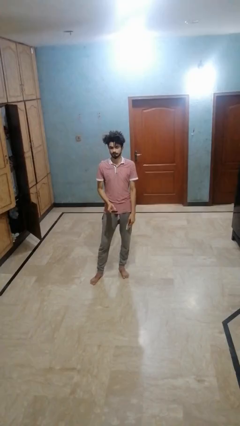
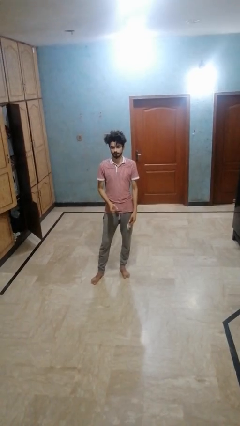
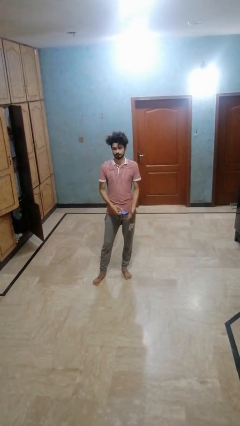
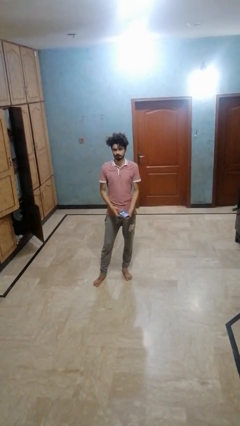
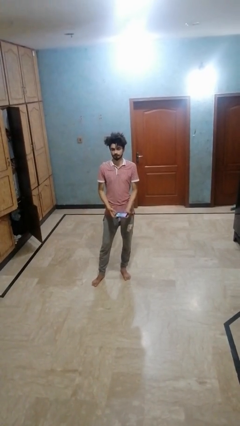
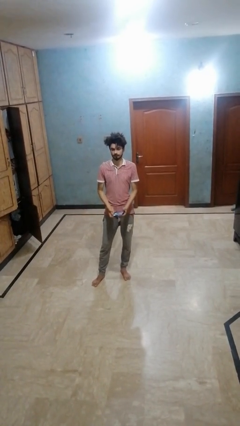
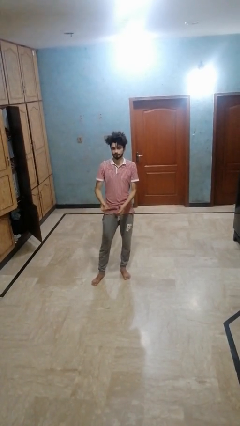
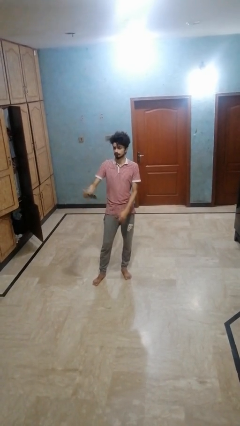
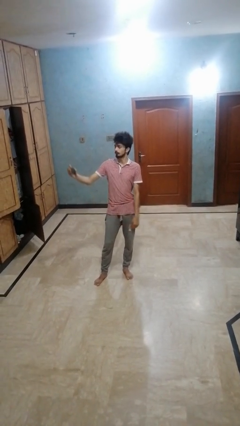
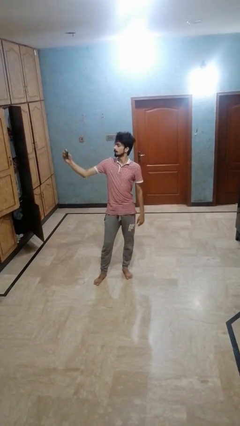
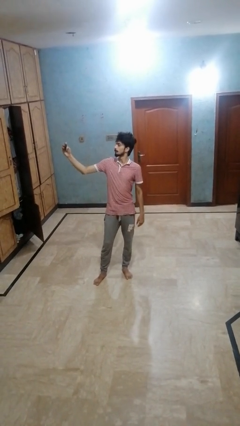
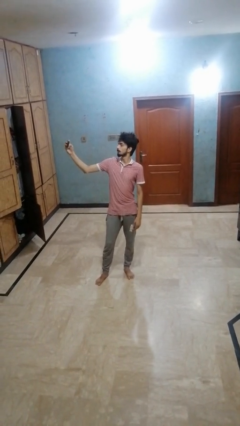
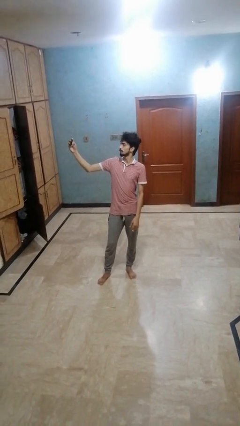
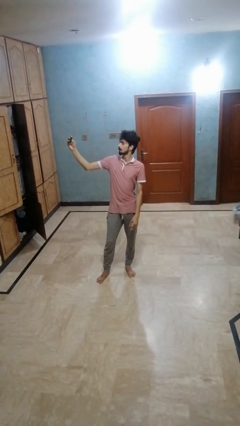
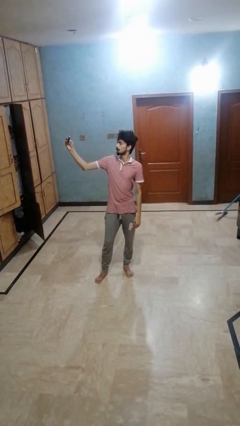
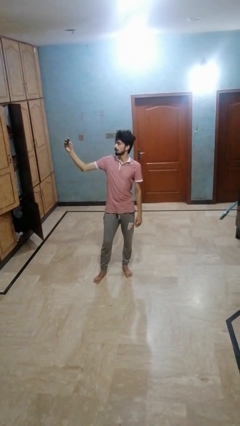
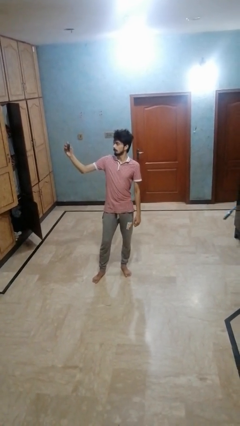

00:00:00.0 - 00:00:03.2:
person takes selfie

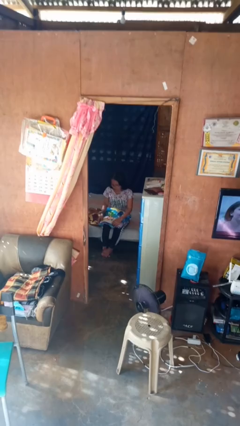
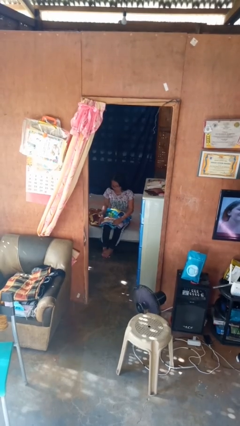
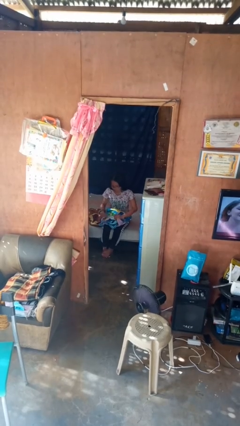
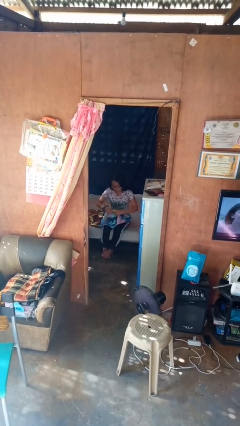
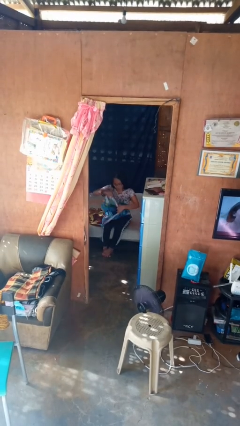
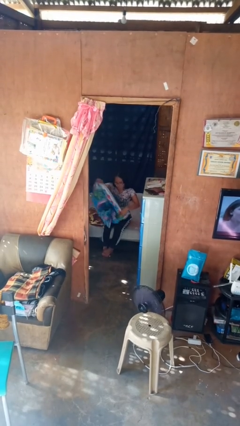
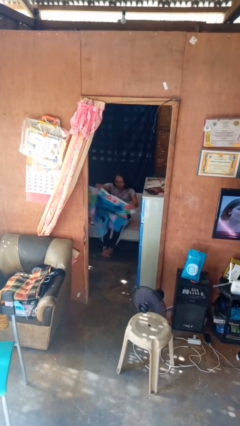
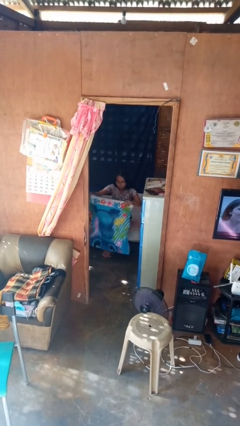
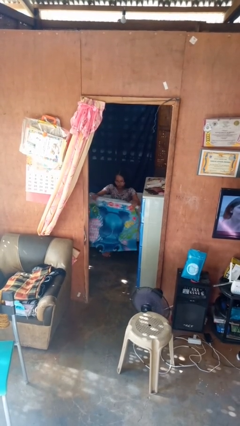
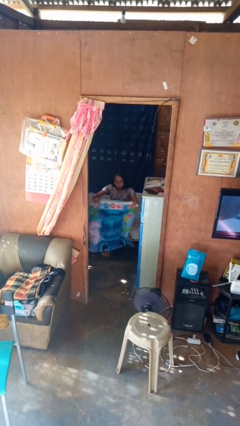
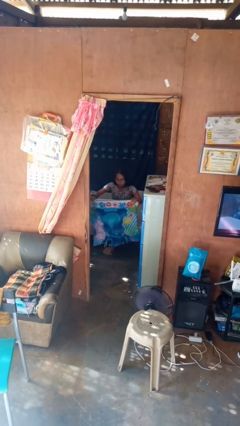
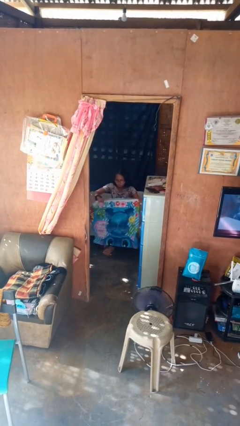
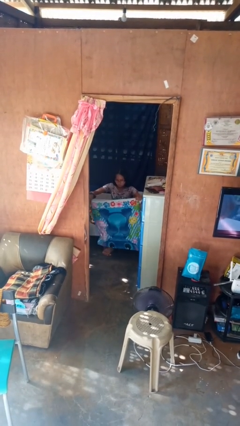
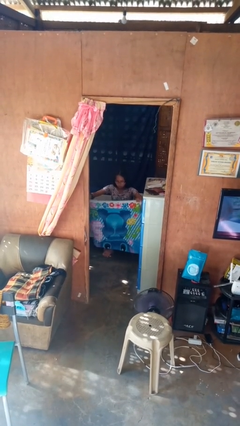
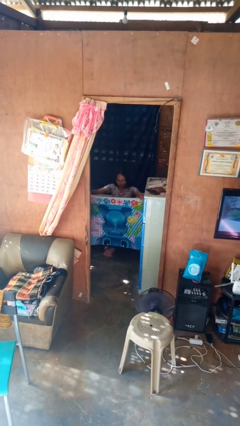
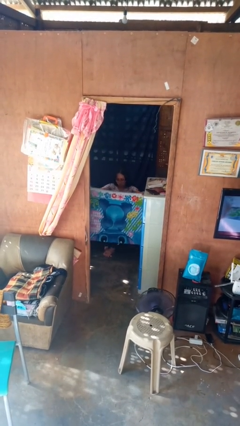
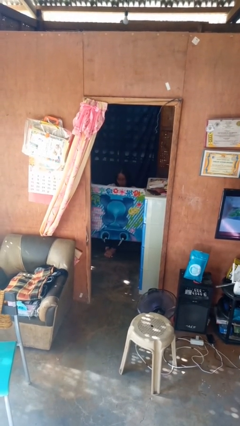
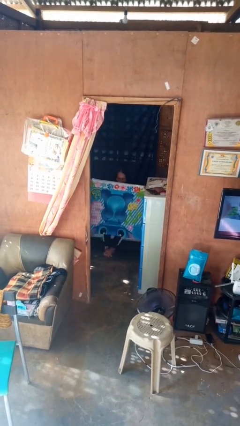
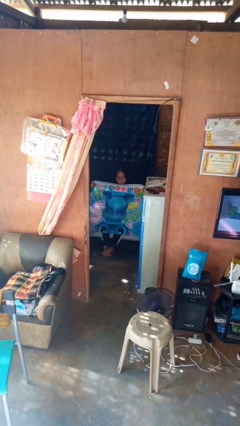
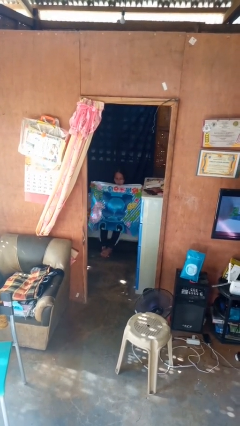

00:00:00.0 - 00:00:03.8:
person unfolds blanket

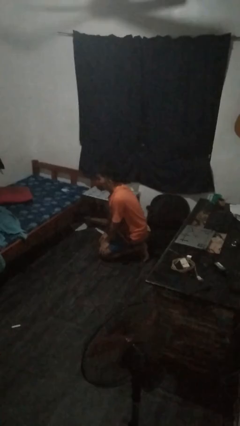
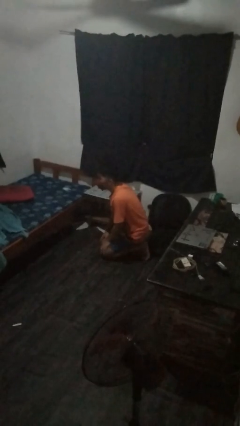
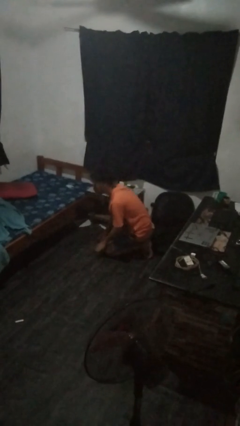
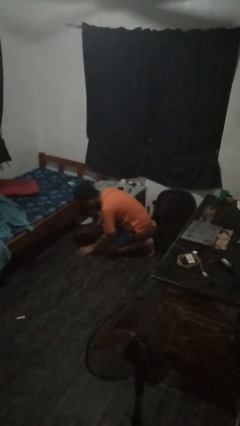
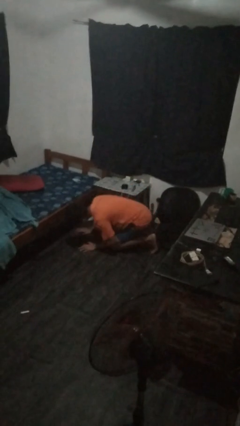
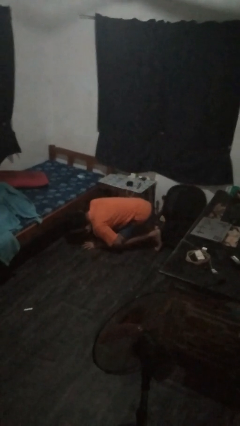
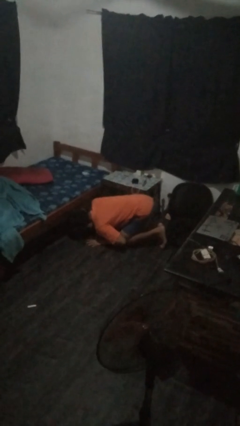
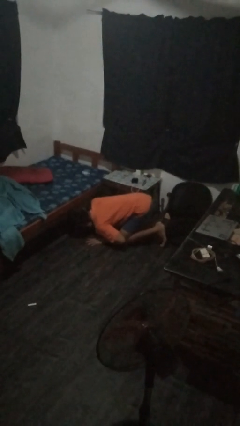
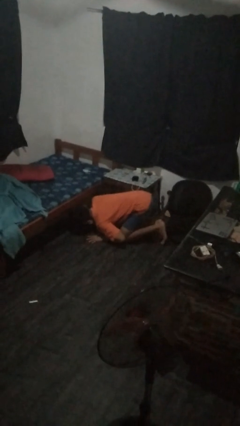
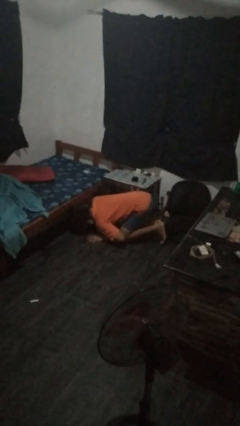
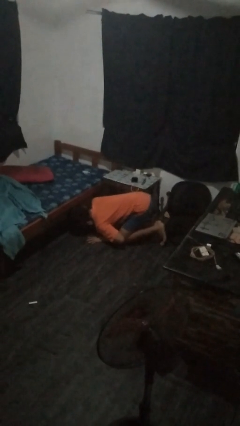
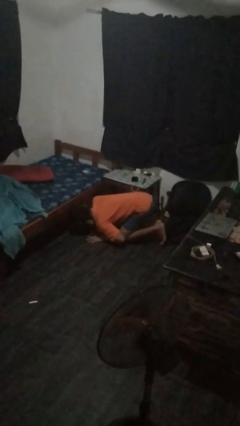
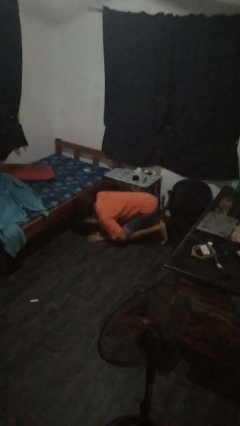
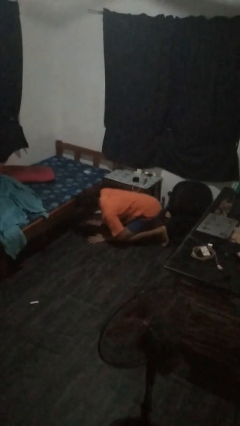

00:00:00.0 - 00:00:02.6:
person searches under bed

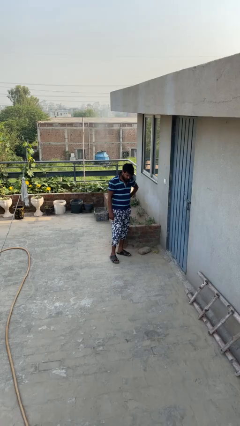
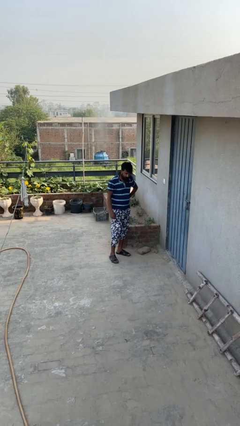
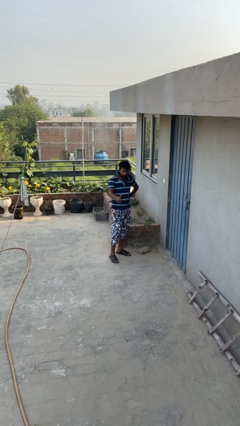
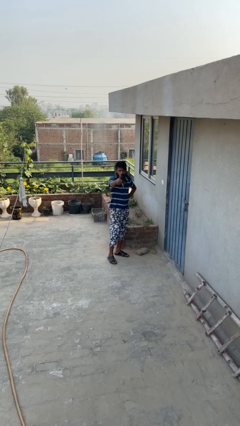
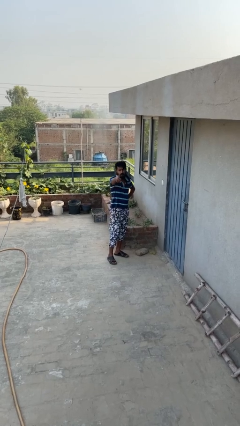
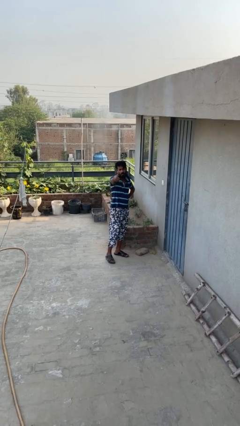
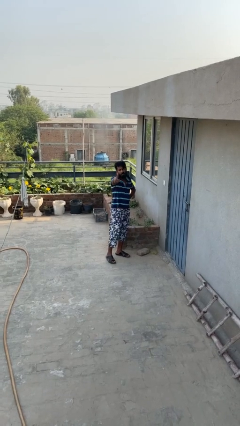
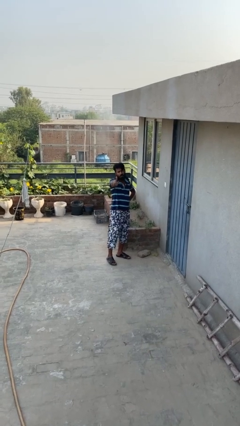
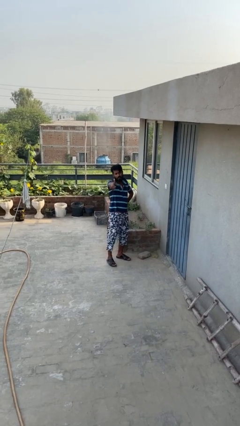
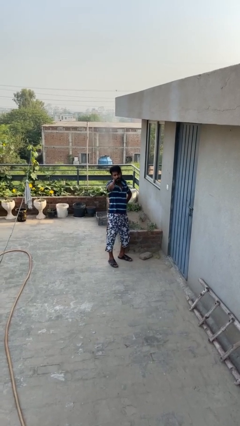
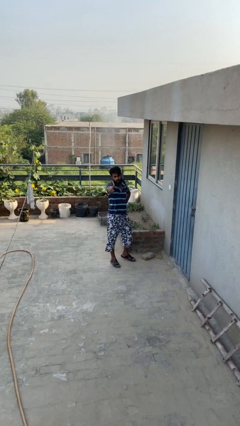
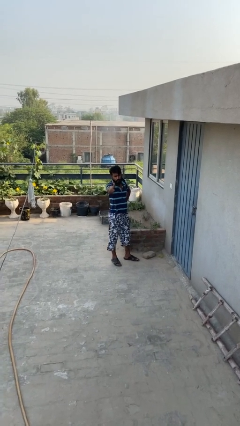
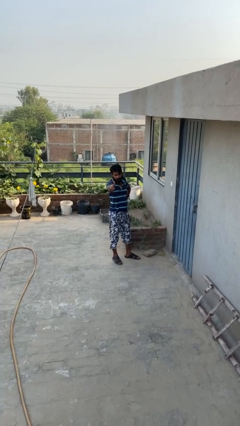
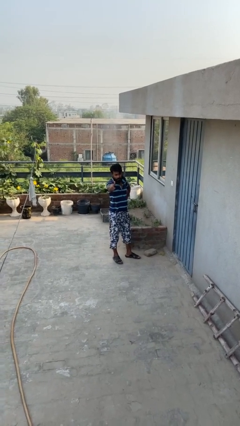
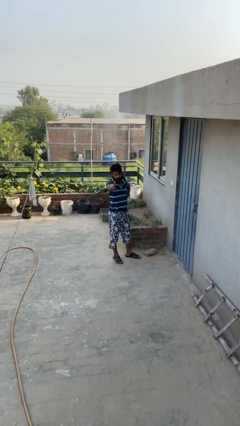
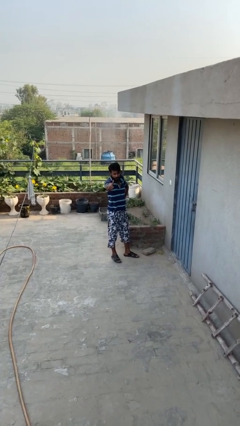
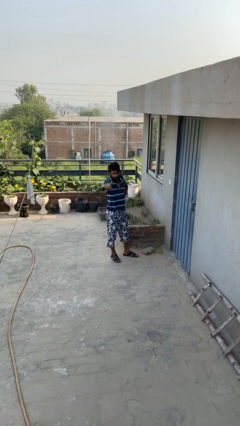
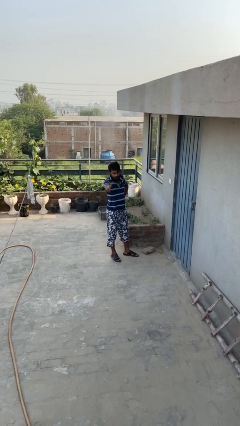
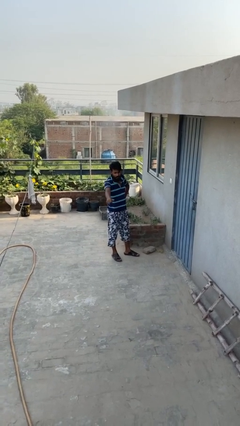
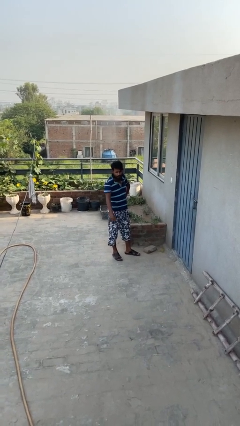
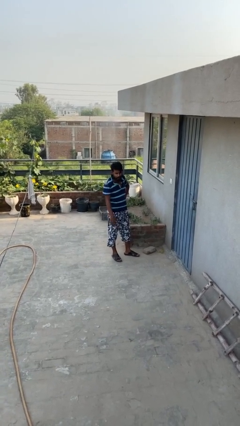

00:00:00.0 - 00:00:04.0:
person gestures thumbs up

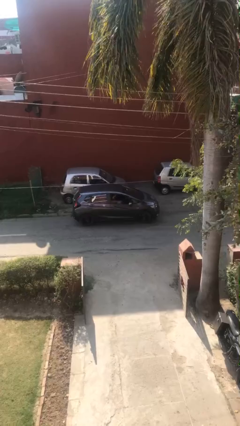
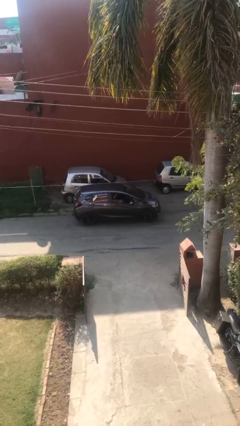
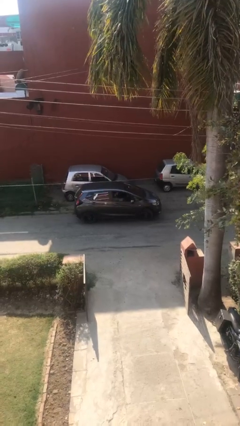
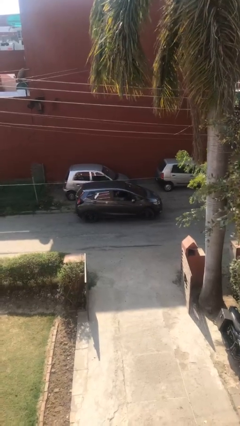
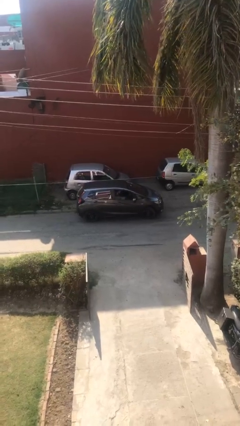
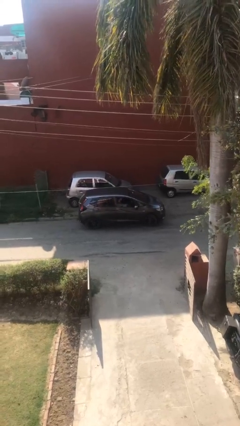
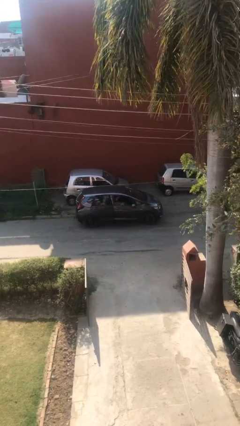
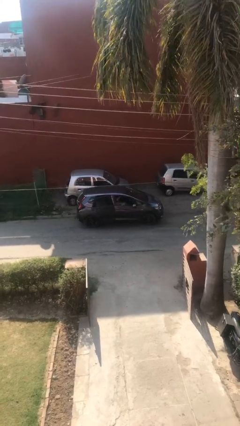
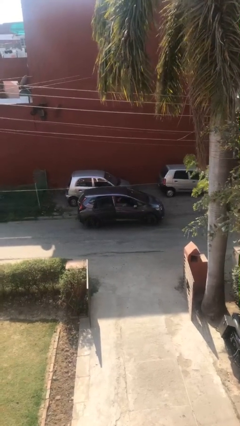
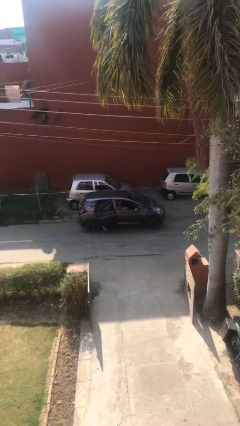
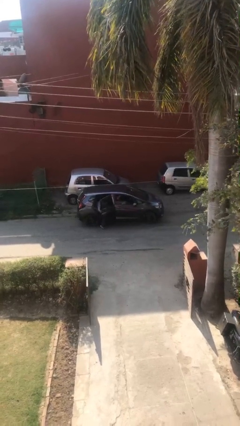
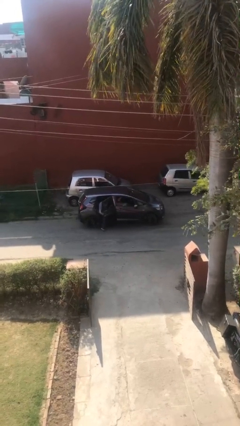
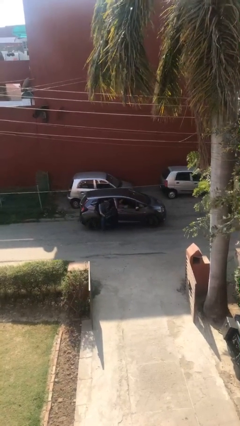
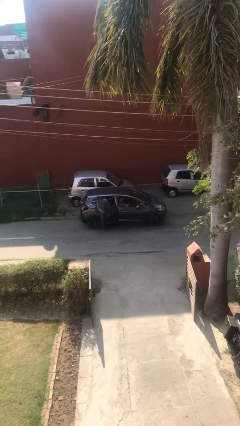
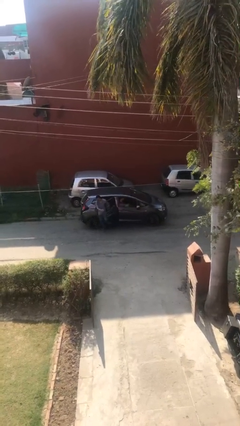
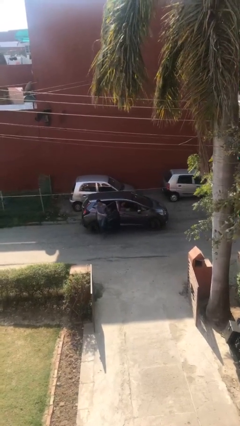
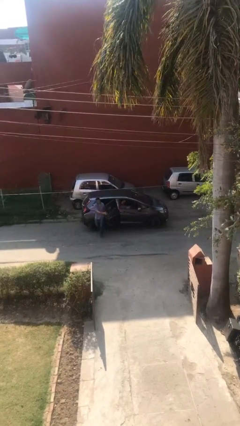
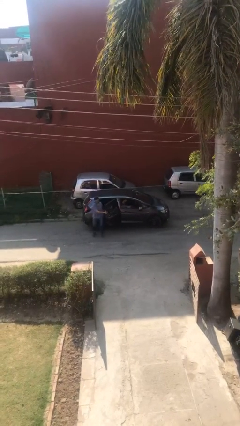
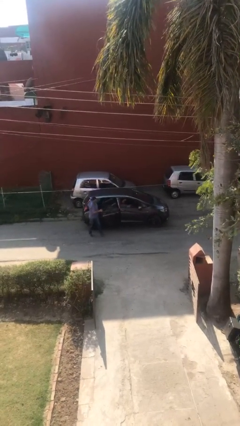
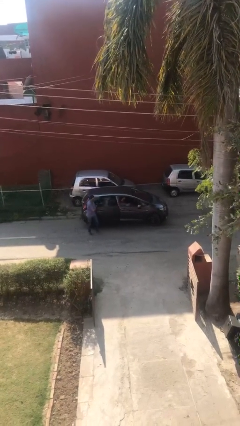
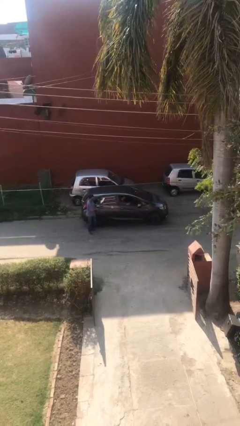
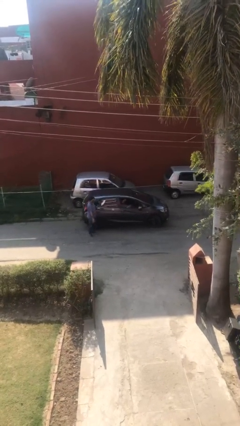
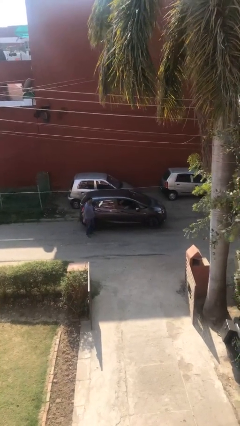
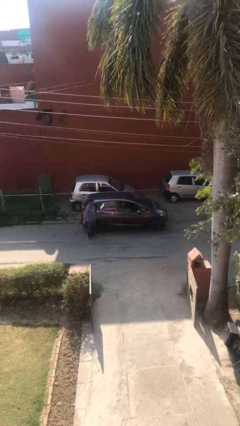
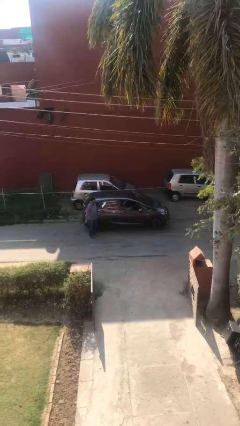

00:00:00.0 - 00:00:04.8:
car drops off person
